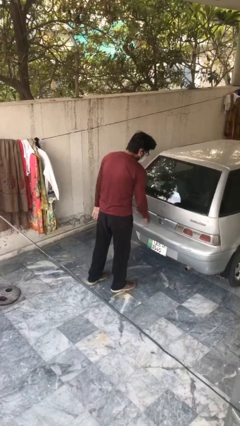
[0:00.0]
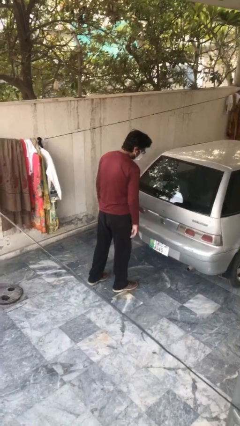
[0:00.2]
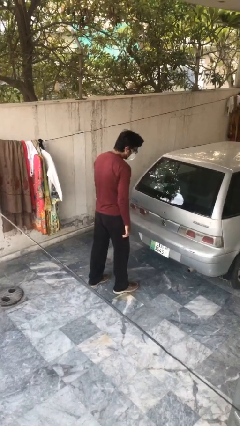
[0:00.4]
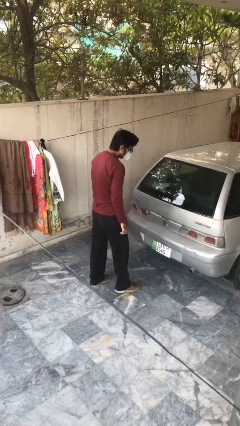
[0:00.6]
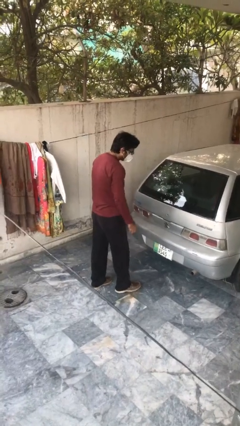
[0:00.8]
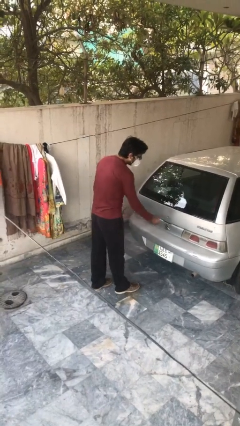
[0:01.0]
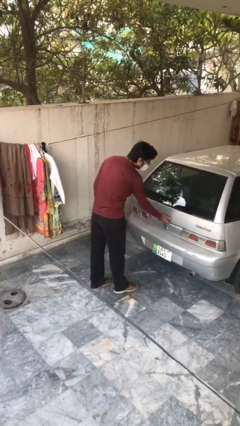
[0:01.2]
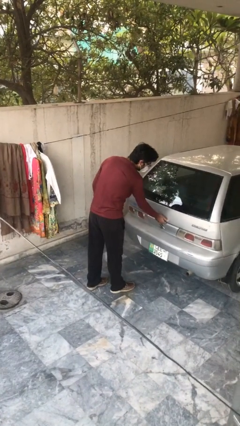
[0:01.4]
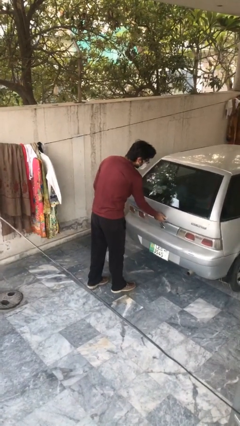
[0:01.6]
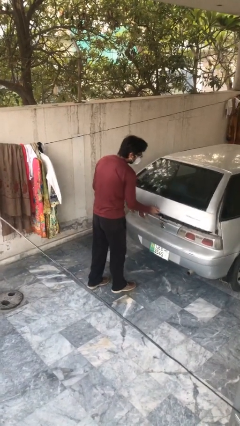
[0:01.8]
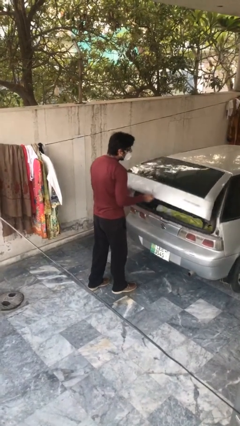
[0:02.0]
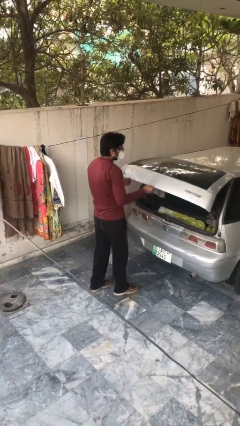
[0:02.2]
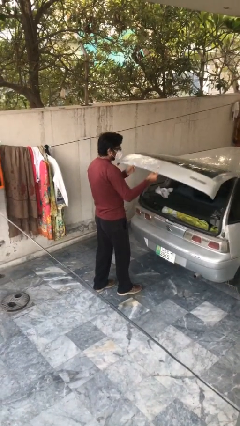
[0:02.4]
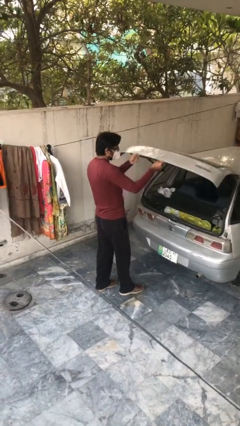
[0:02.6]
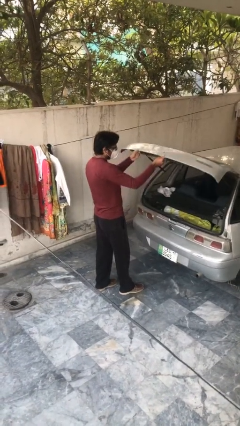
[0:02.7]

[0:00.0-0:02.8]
person opens car trunk

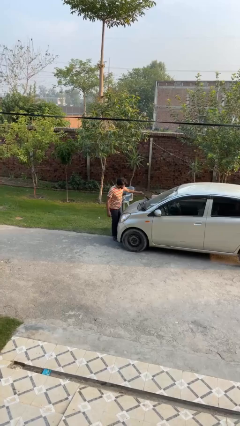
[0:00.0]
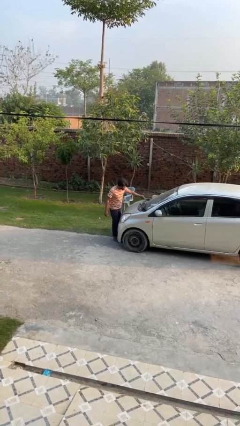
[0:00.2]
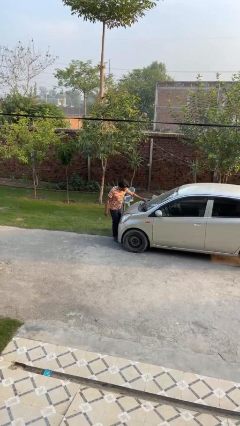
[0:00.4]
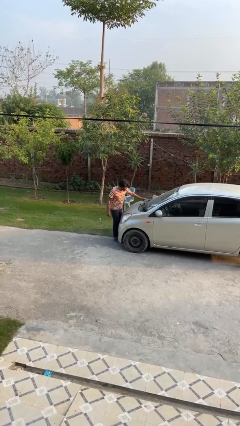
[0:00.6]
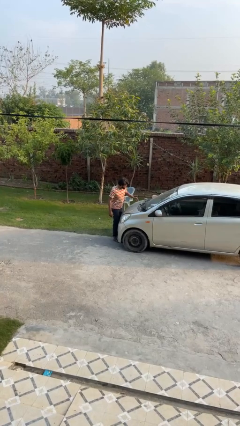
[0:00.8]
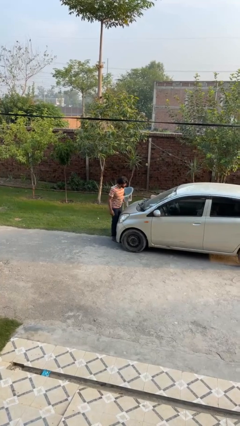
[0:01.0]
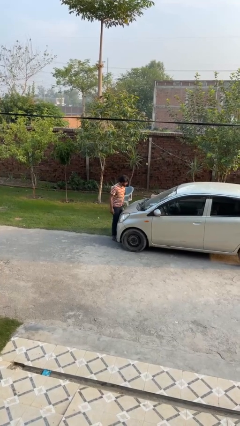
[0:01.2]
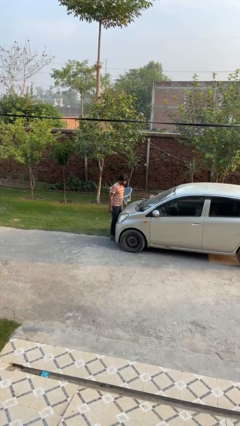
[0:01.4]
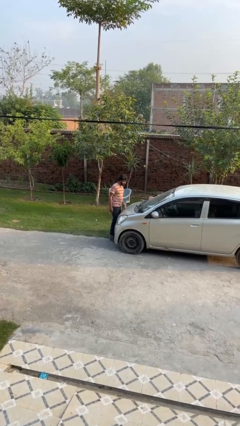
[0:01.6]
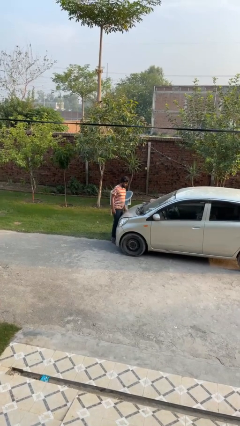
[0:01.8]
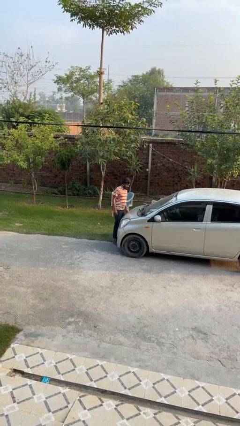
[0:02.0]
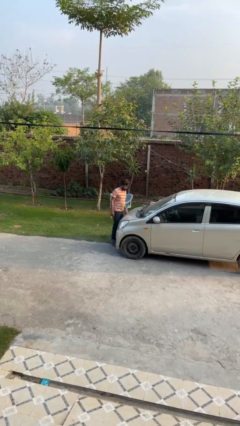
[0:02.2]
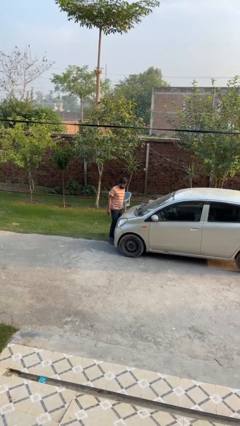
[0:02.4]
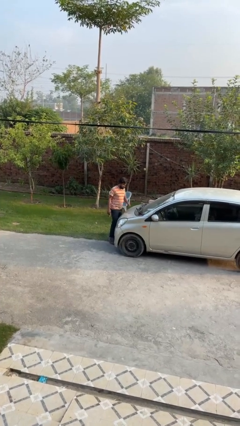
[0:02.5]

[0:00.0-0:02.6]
person flips down car wipers

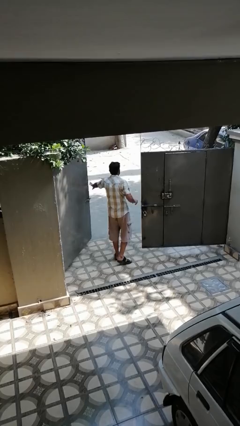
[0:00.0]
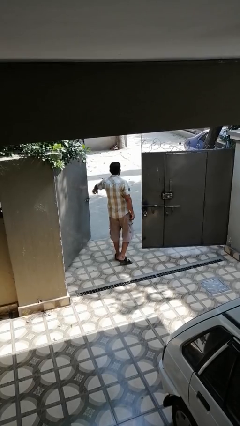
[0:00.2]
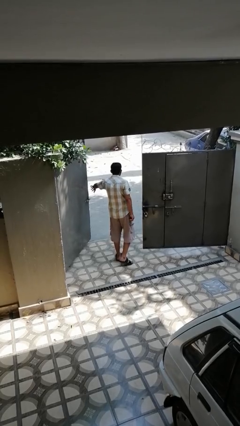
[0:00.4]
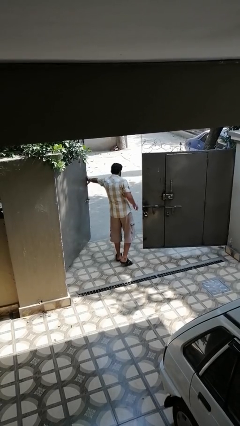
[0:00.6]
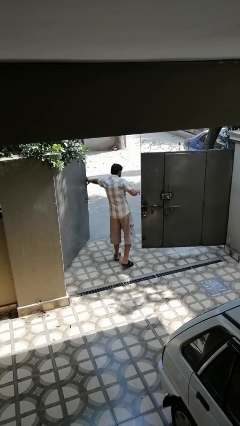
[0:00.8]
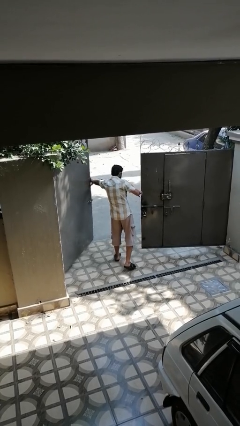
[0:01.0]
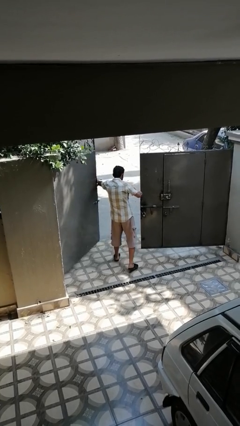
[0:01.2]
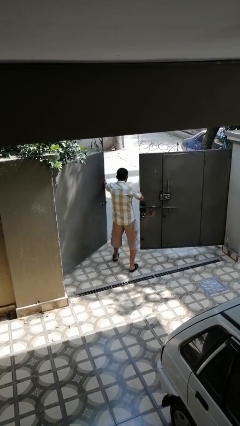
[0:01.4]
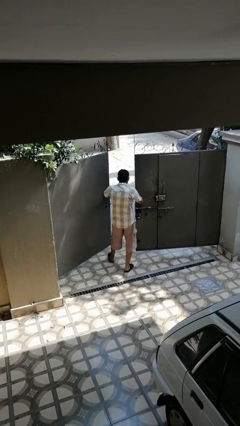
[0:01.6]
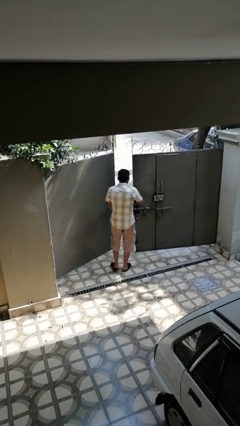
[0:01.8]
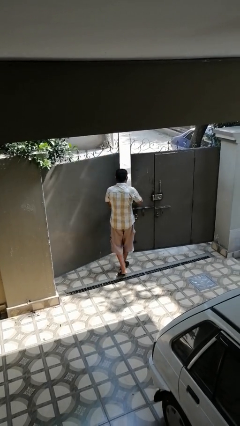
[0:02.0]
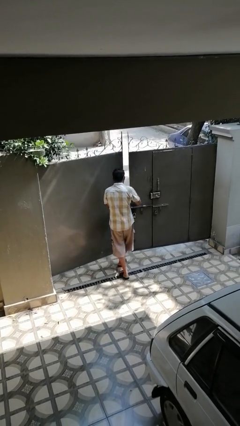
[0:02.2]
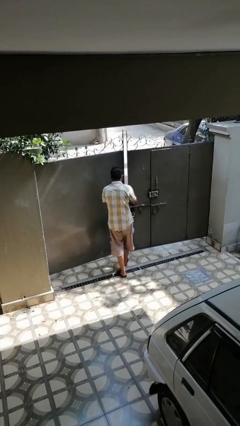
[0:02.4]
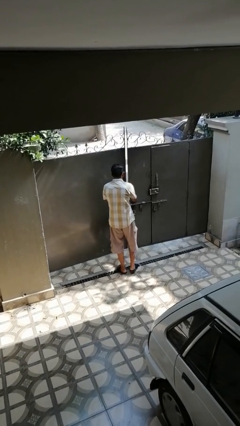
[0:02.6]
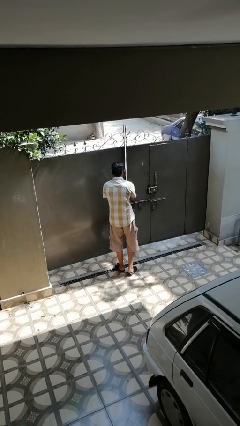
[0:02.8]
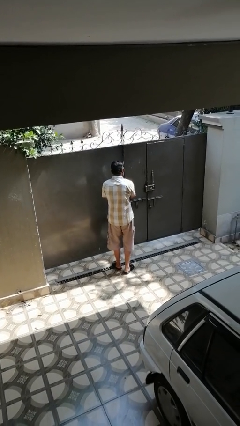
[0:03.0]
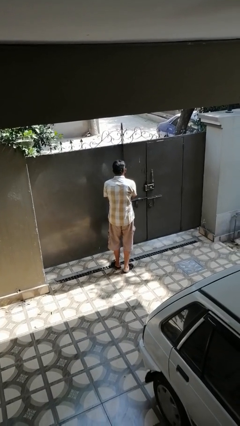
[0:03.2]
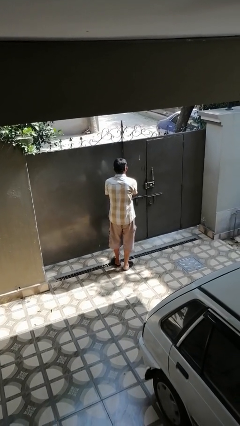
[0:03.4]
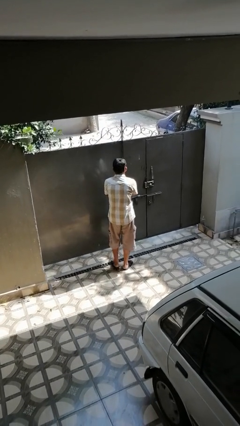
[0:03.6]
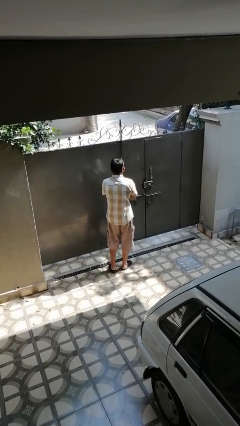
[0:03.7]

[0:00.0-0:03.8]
person closes gate

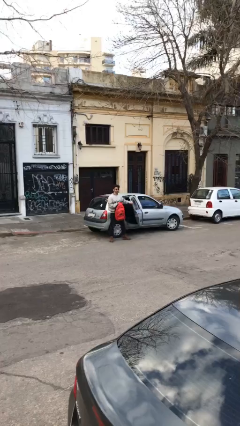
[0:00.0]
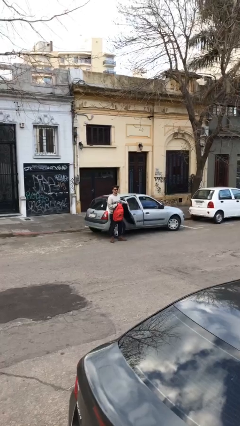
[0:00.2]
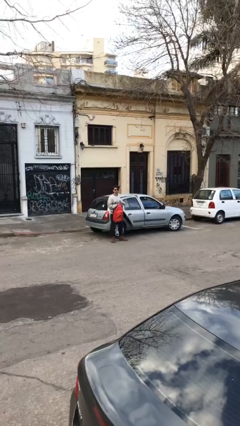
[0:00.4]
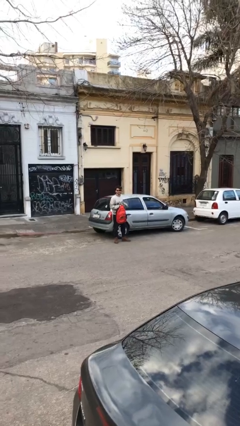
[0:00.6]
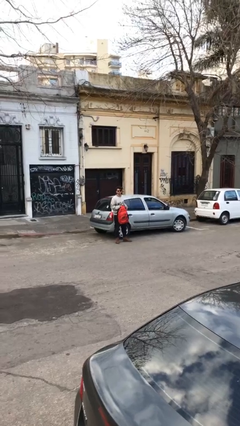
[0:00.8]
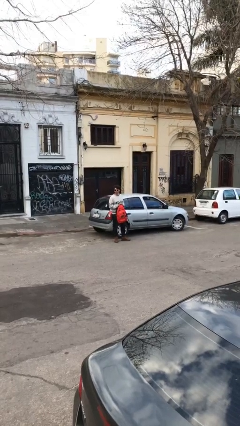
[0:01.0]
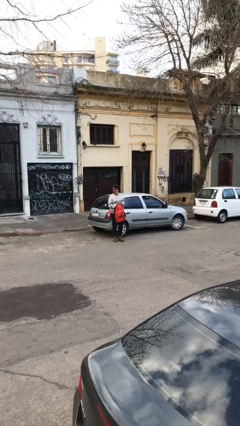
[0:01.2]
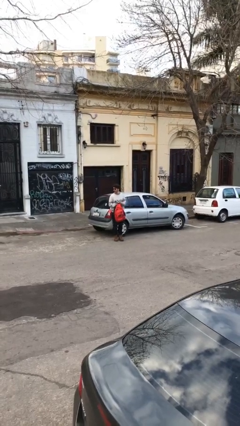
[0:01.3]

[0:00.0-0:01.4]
person closes car door

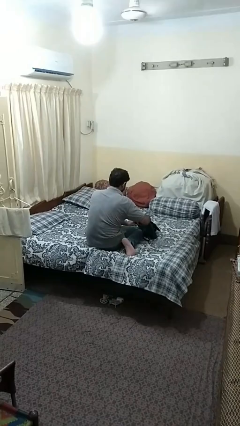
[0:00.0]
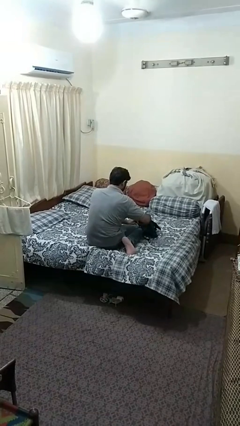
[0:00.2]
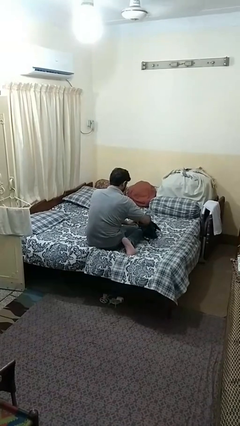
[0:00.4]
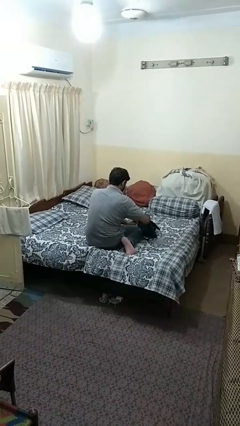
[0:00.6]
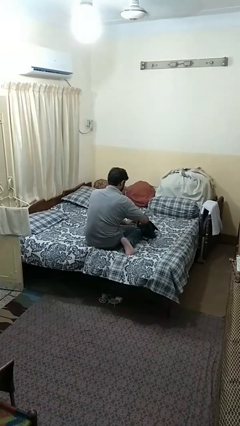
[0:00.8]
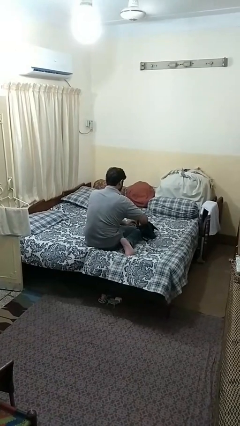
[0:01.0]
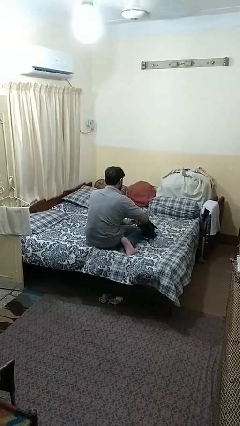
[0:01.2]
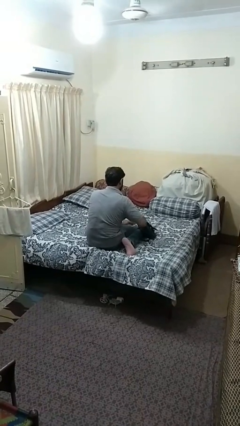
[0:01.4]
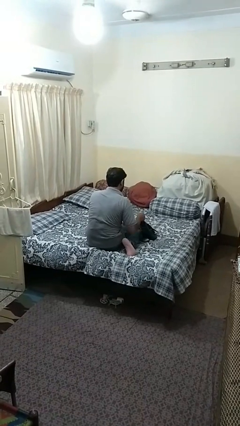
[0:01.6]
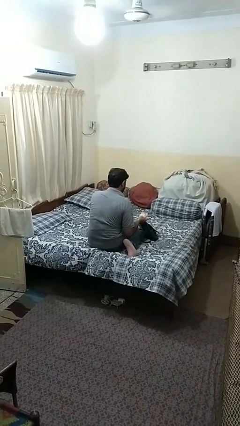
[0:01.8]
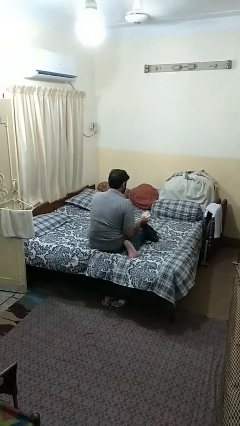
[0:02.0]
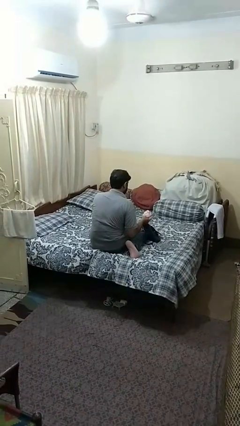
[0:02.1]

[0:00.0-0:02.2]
person takes object from purse

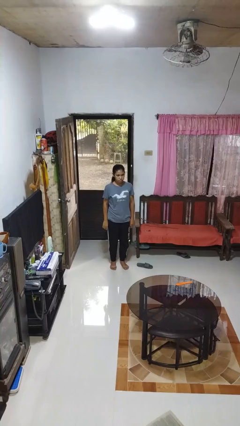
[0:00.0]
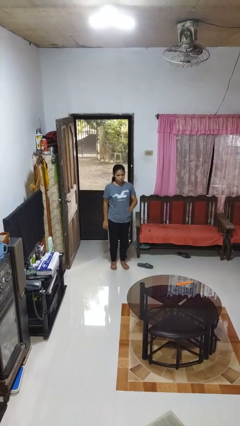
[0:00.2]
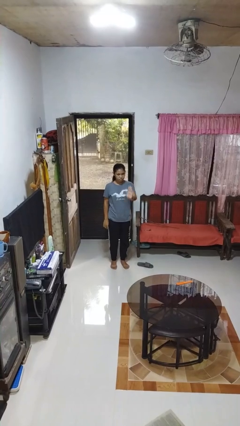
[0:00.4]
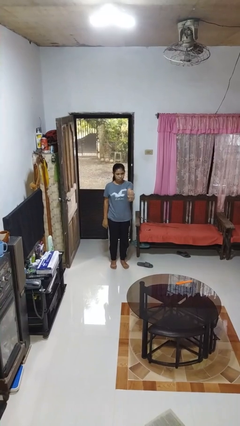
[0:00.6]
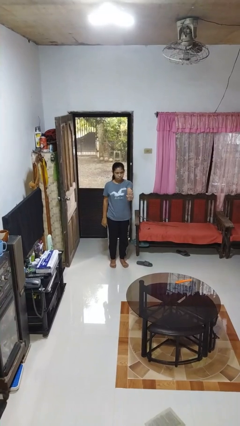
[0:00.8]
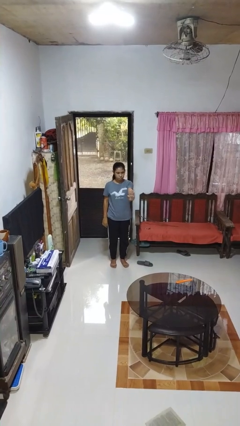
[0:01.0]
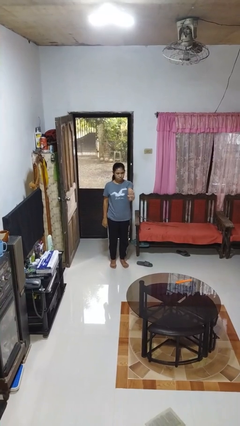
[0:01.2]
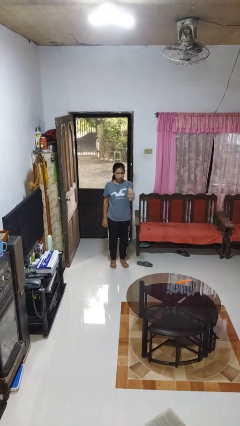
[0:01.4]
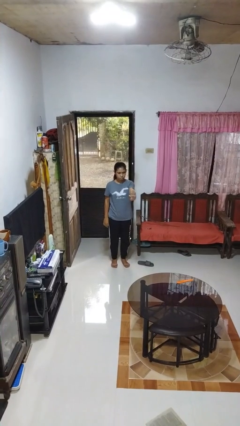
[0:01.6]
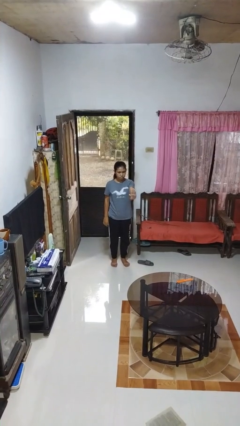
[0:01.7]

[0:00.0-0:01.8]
person gestures stop

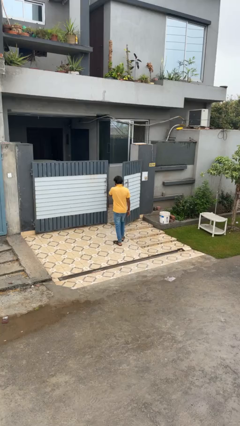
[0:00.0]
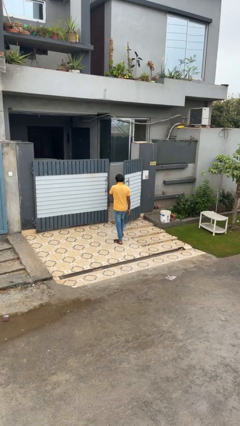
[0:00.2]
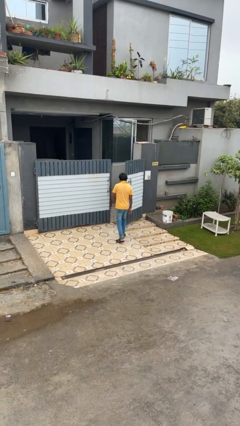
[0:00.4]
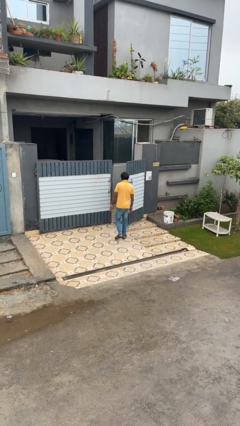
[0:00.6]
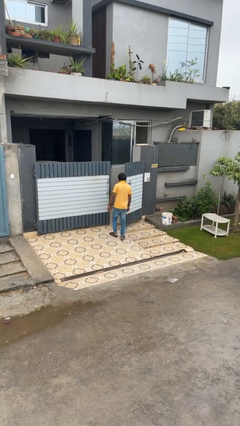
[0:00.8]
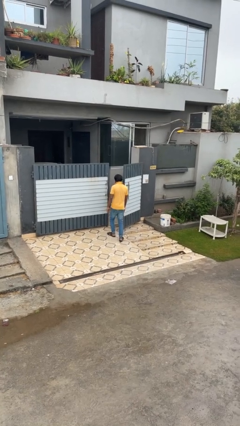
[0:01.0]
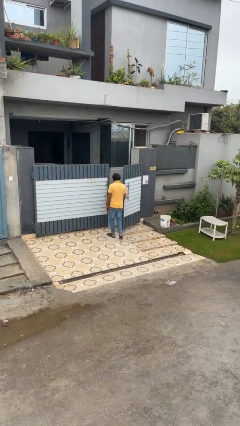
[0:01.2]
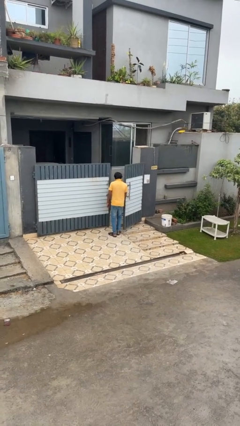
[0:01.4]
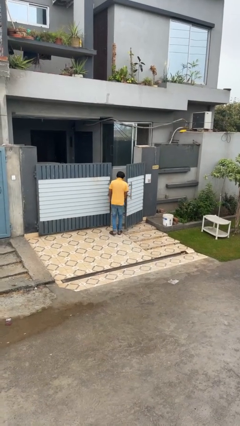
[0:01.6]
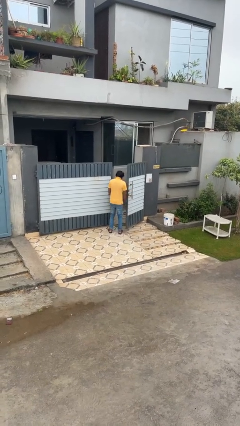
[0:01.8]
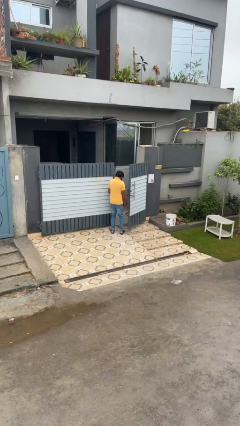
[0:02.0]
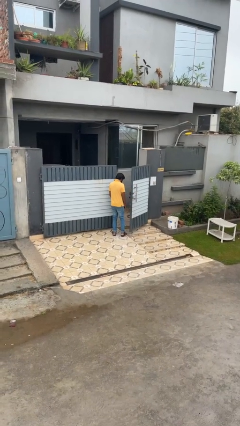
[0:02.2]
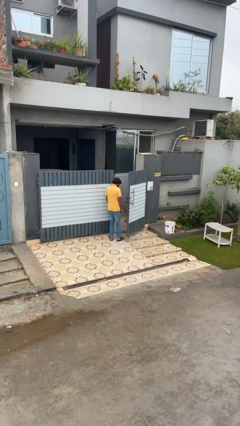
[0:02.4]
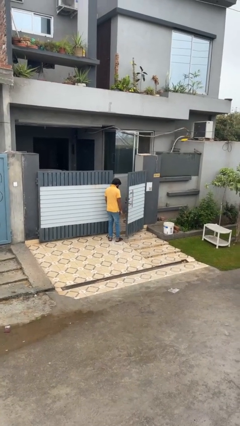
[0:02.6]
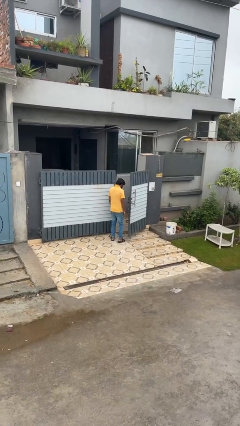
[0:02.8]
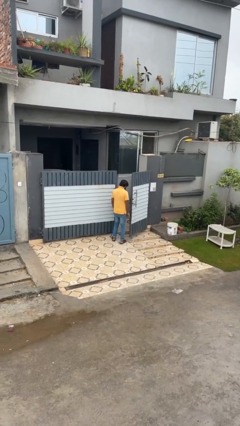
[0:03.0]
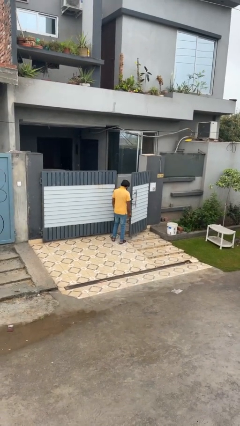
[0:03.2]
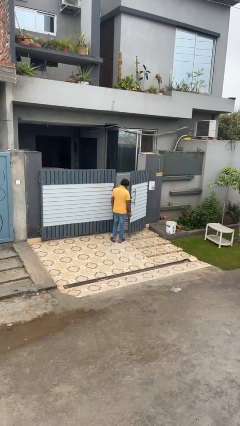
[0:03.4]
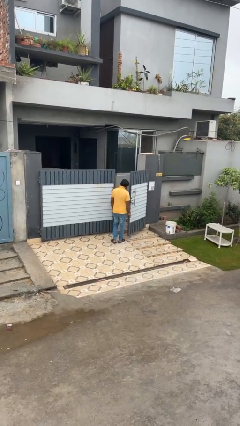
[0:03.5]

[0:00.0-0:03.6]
person bumps into wall
